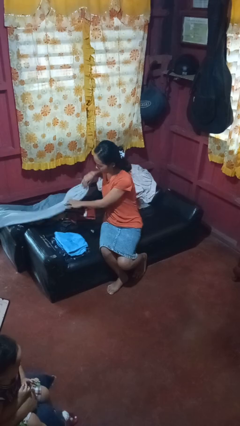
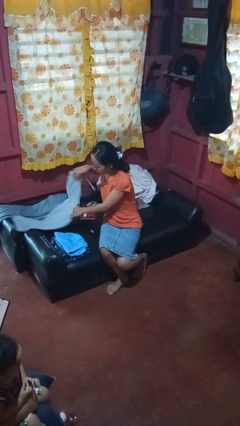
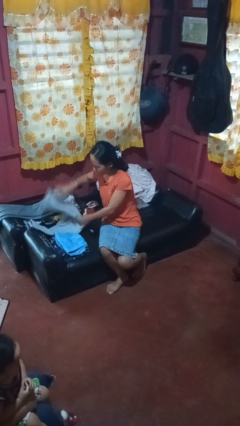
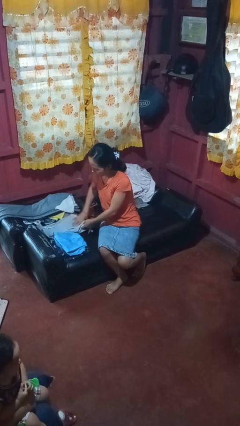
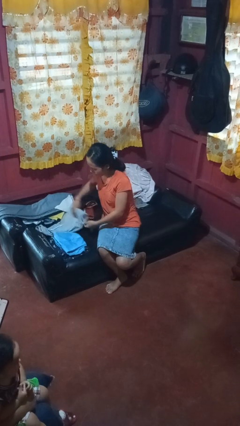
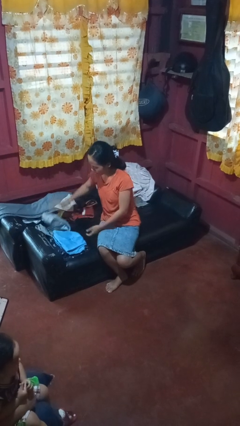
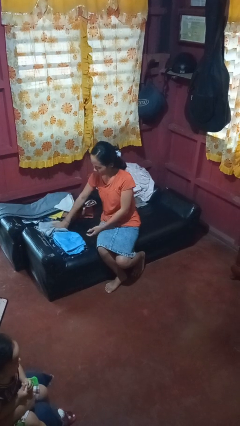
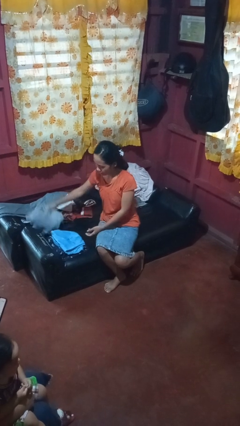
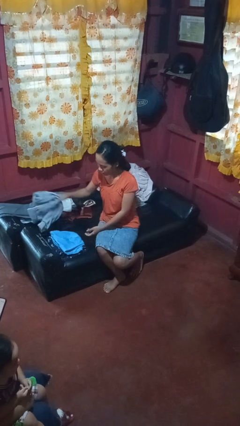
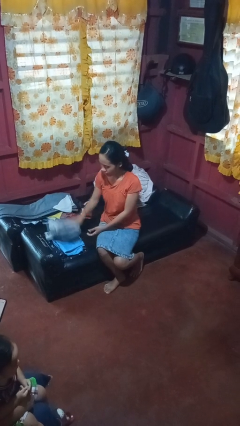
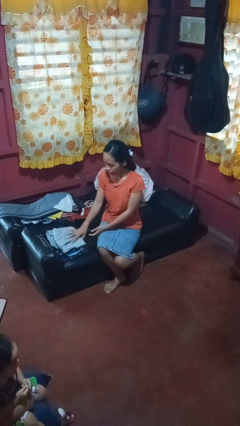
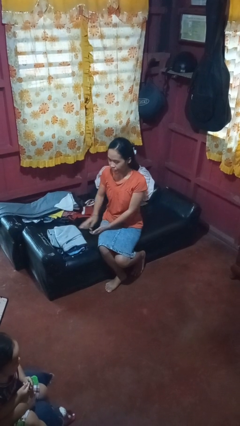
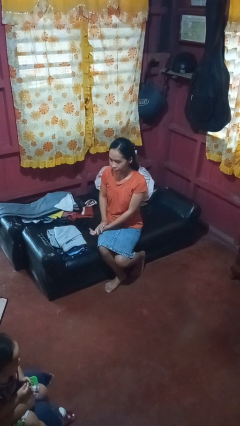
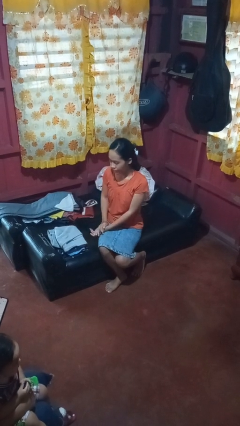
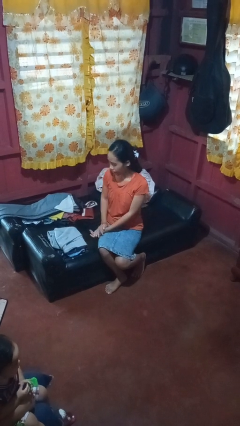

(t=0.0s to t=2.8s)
person folds pants

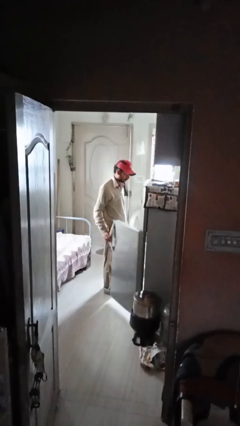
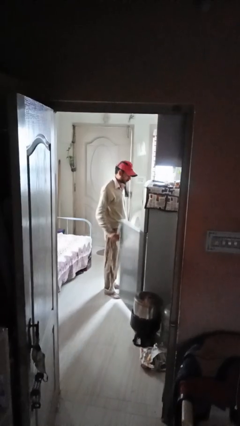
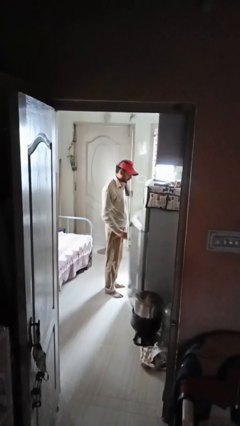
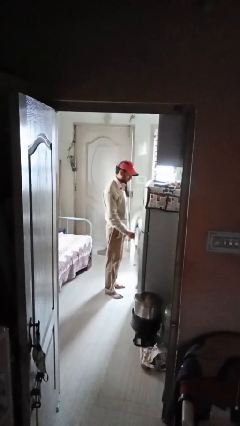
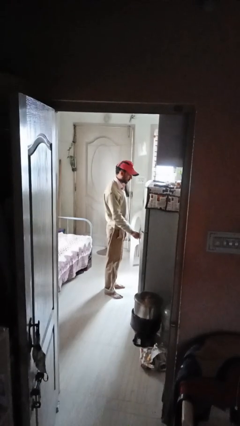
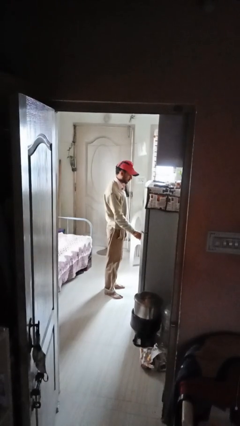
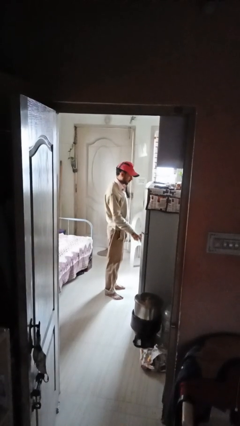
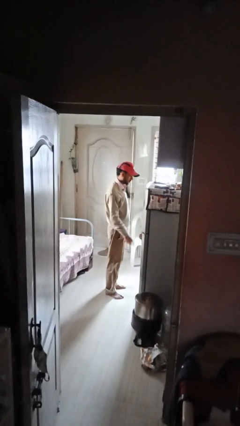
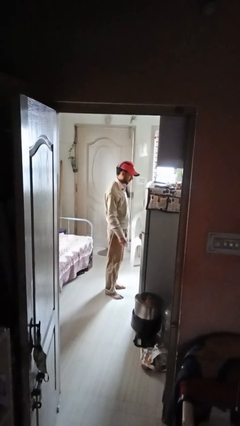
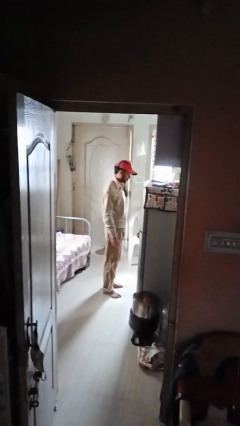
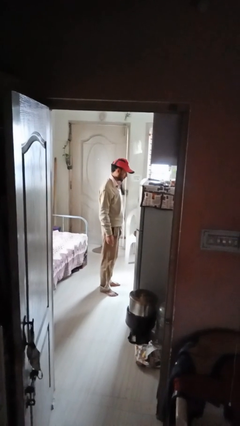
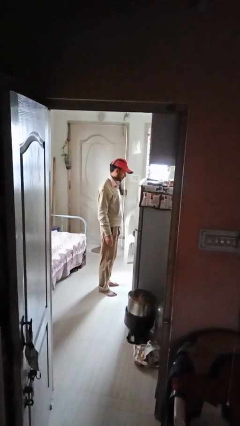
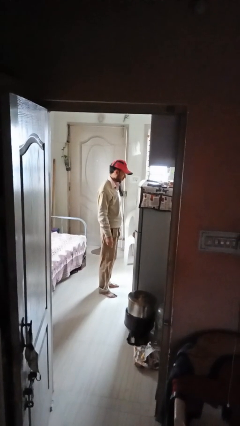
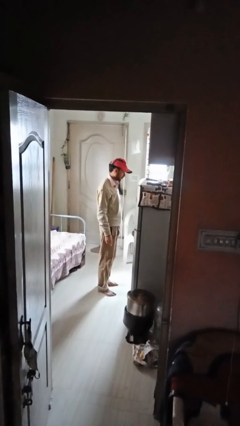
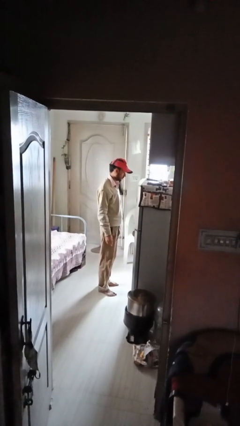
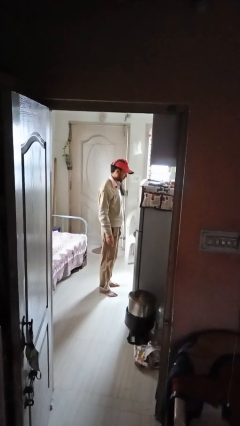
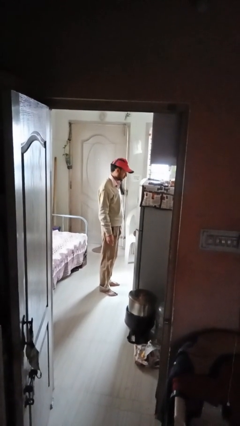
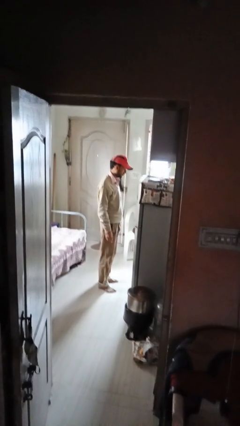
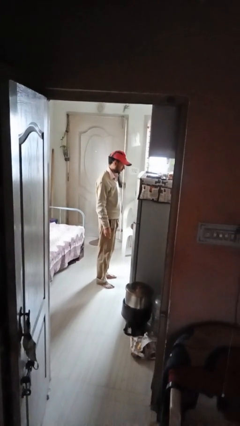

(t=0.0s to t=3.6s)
person closes refrigerator

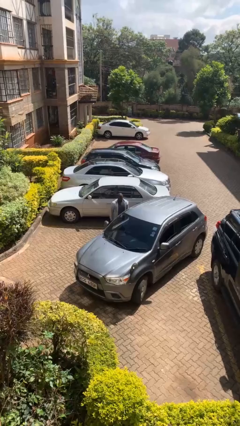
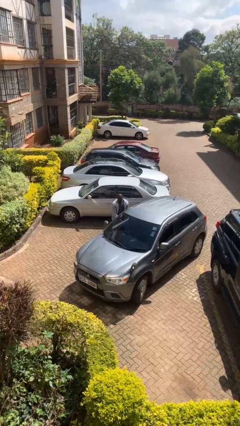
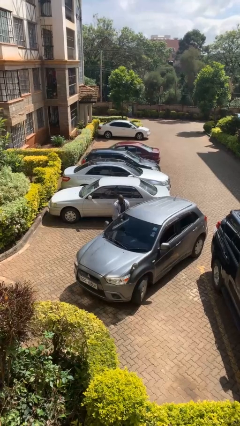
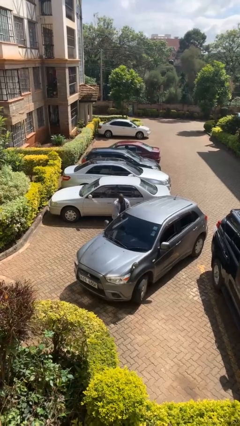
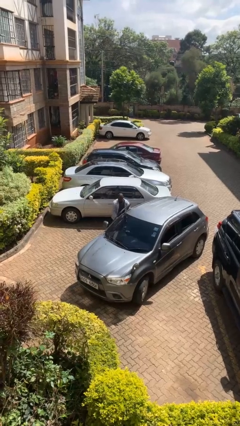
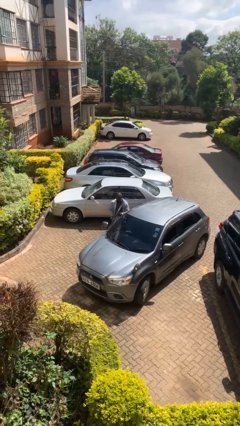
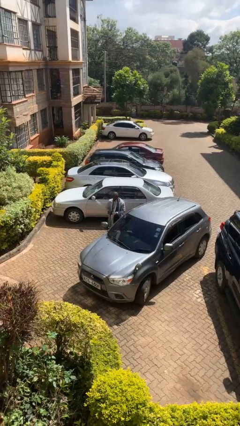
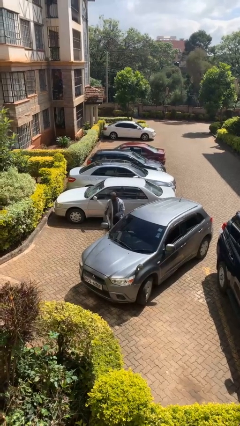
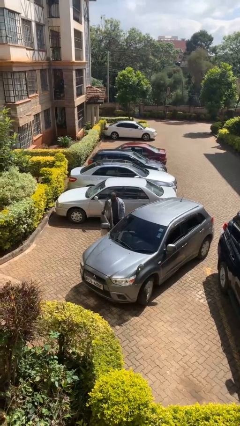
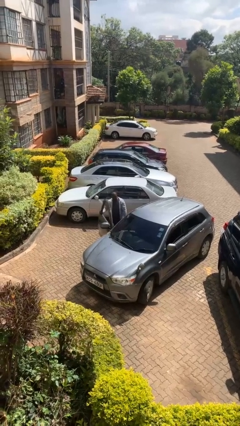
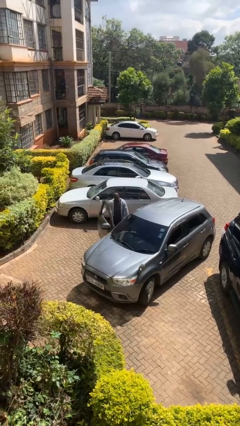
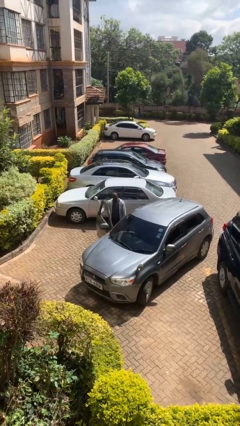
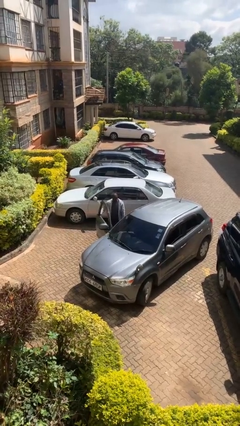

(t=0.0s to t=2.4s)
person opens car door

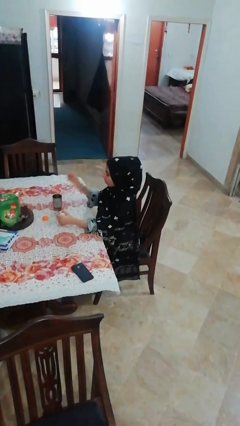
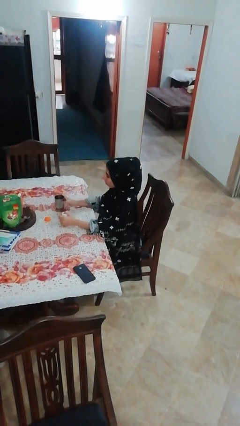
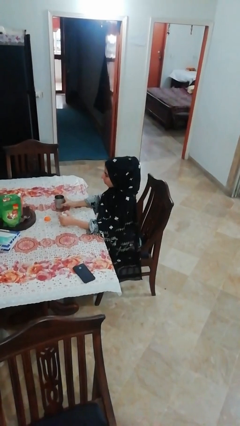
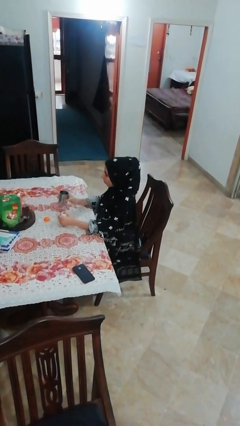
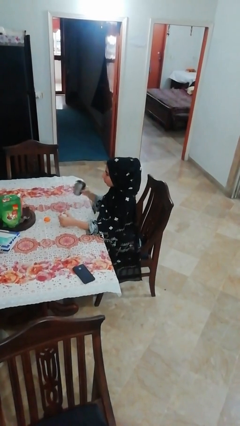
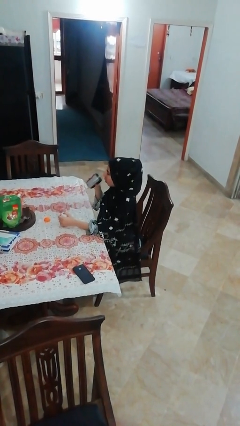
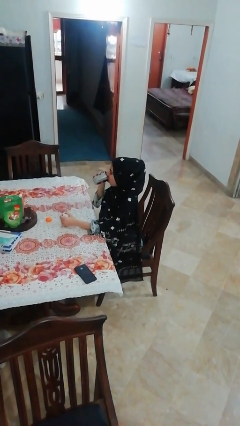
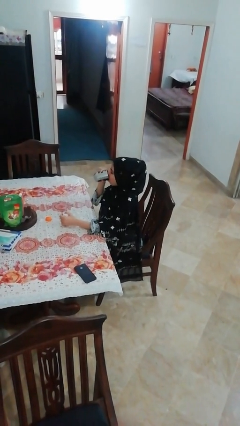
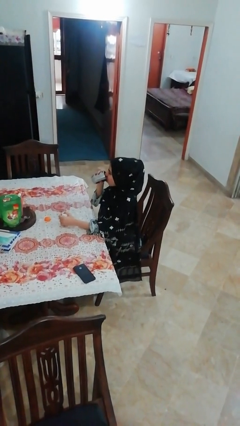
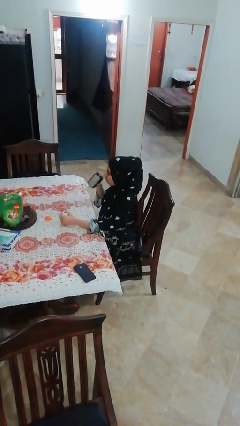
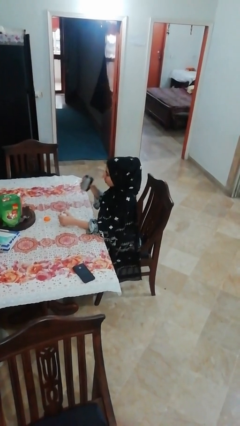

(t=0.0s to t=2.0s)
person drinks from cup

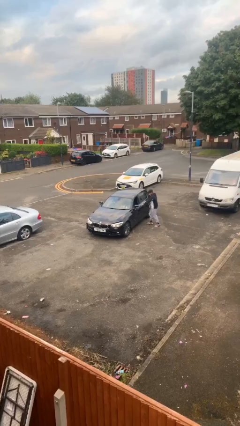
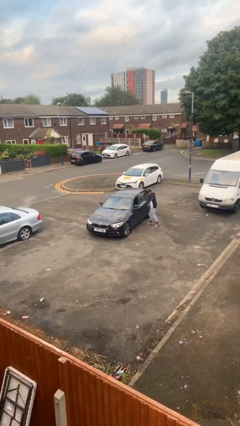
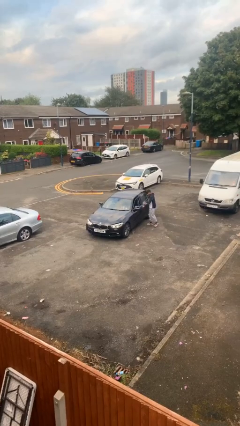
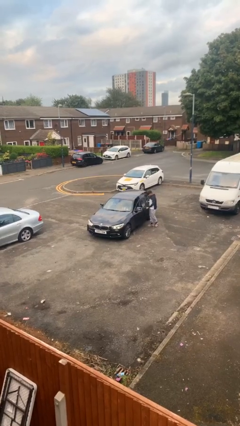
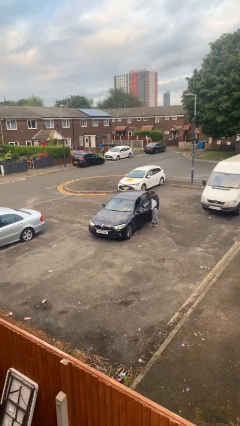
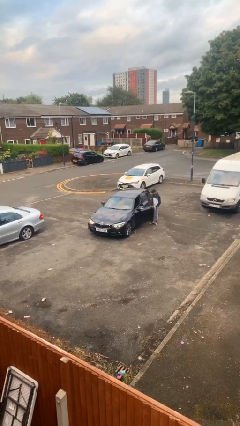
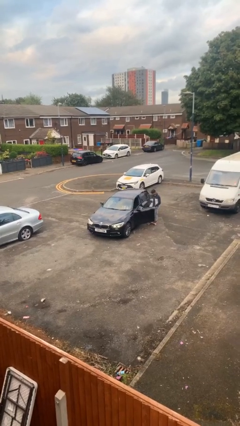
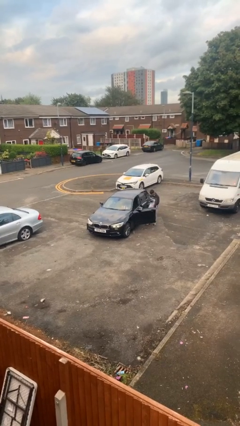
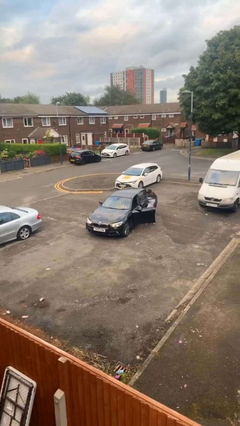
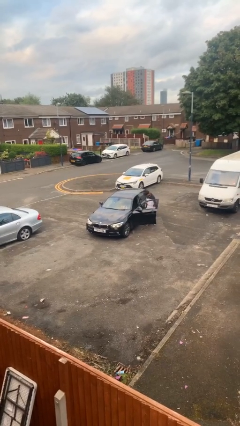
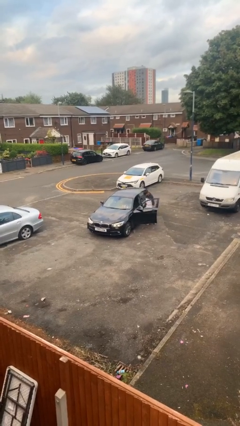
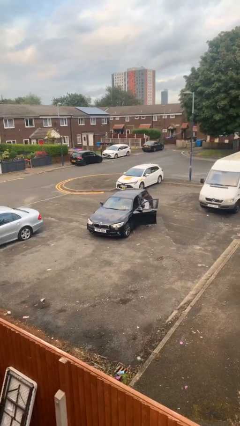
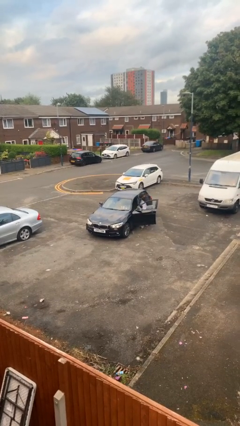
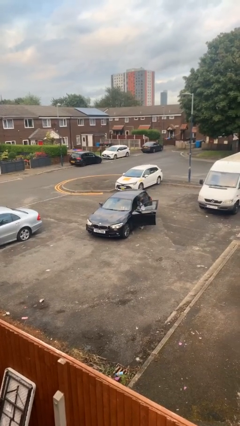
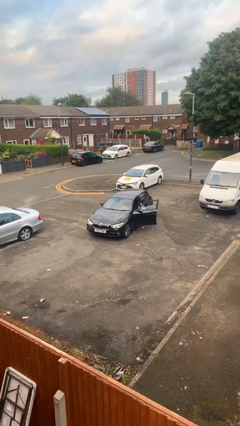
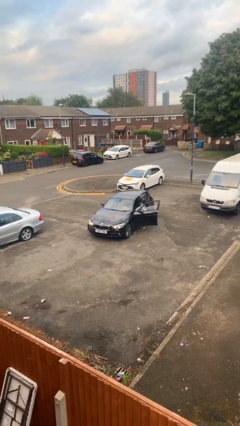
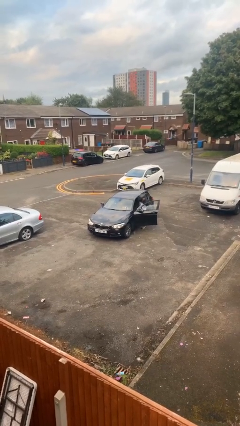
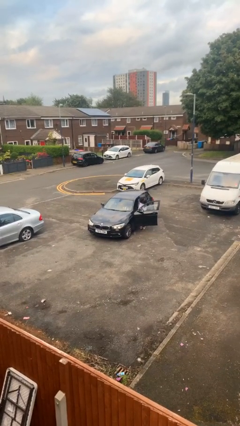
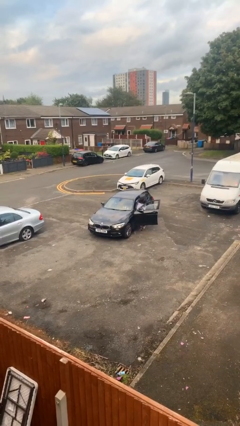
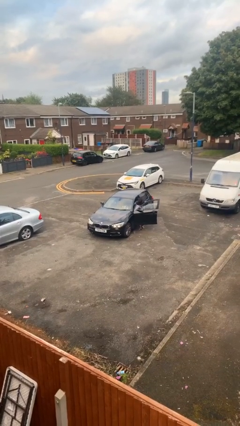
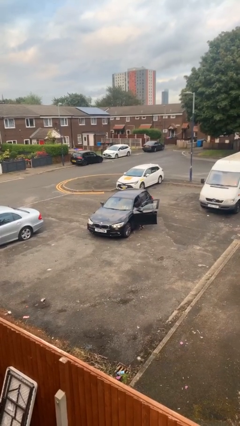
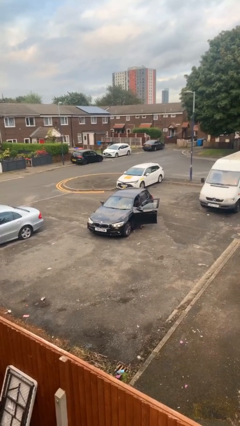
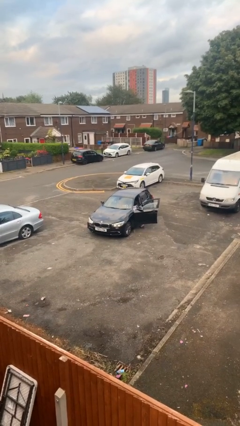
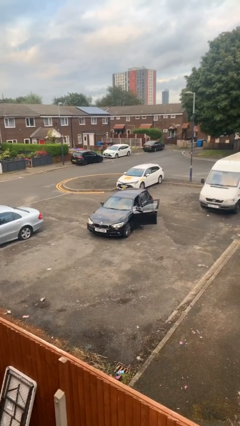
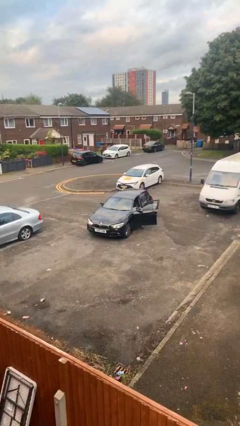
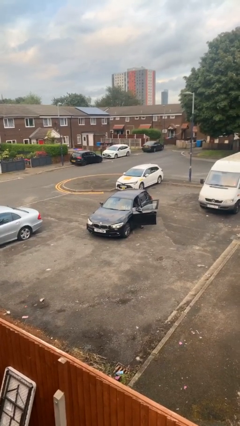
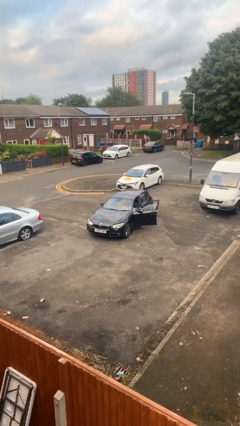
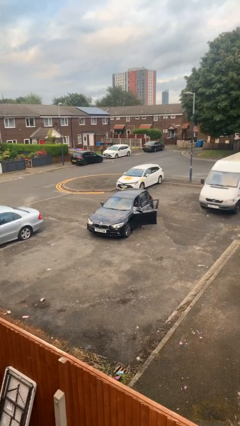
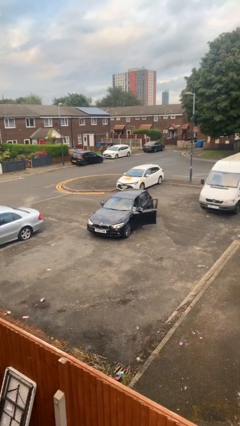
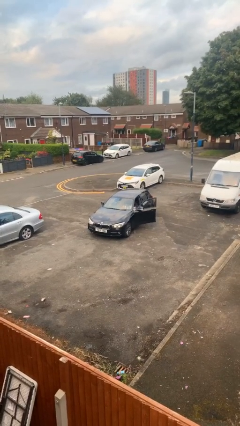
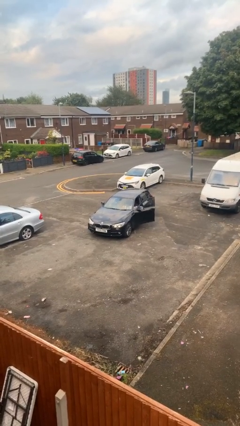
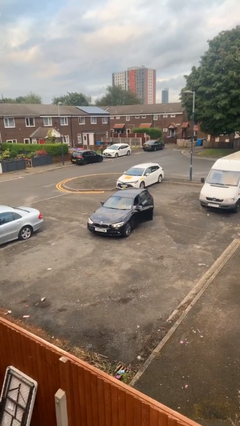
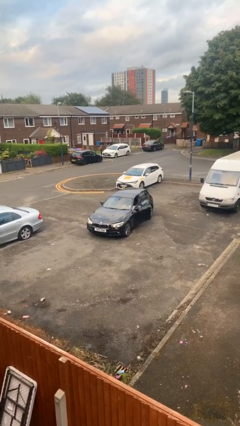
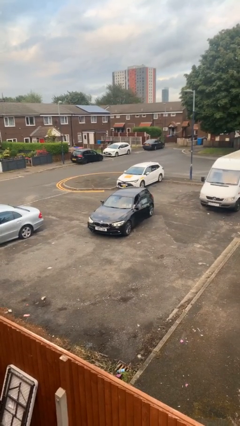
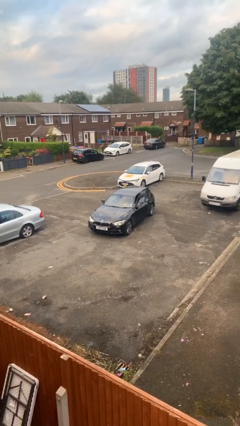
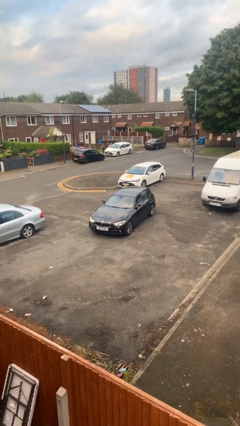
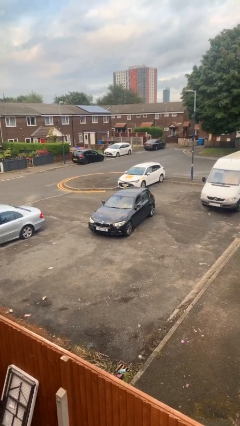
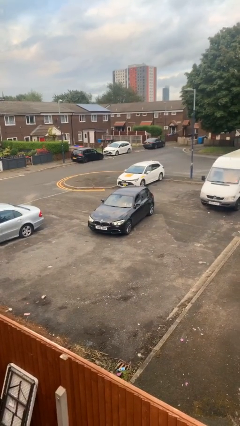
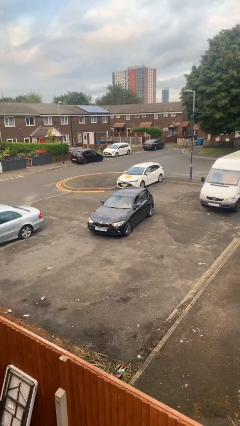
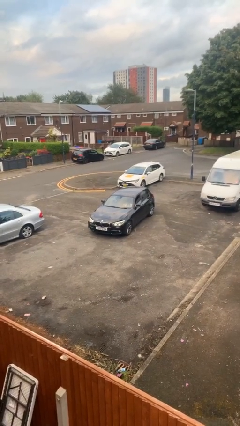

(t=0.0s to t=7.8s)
car picks up person
